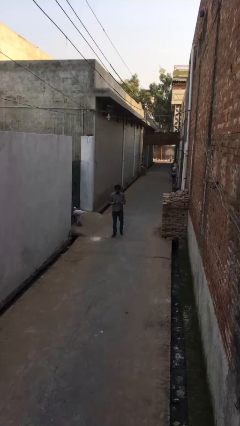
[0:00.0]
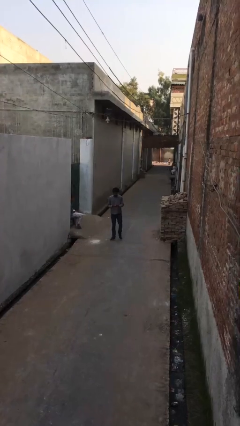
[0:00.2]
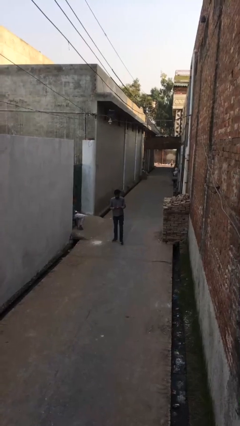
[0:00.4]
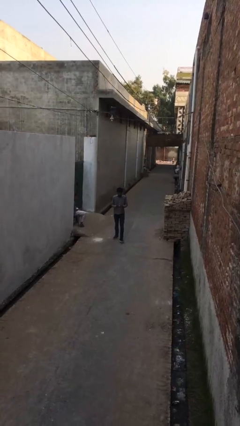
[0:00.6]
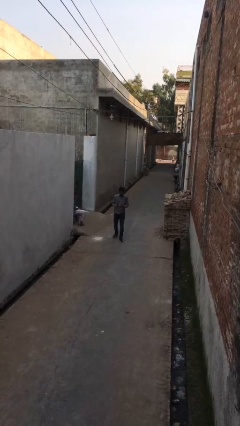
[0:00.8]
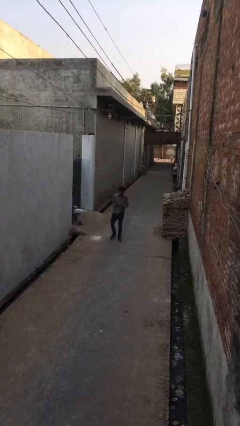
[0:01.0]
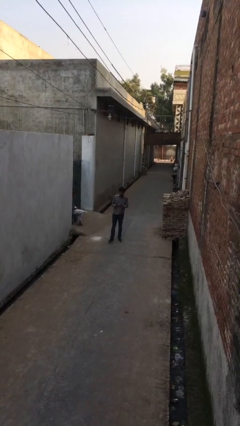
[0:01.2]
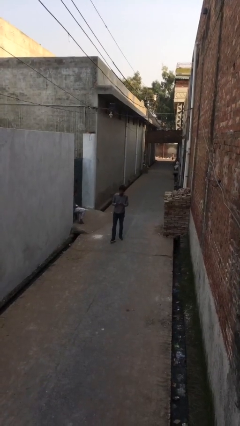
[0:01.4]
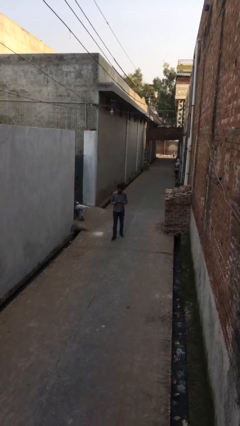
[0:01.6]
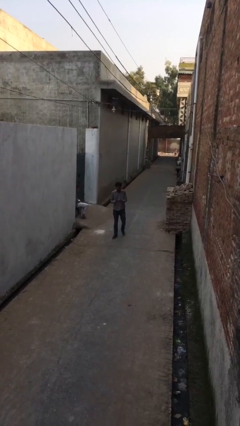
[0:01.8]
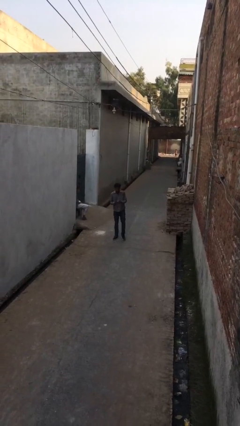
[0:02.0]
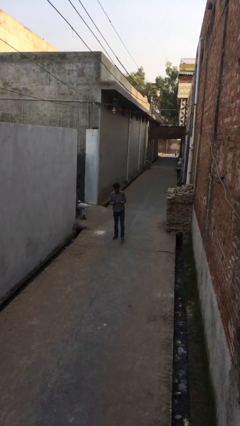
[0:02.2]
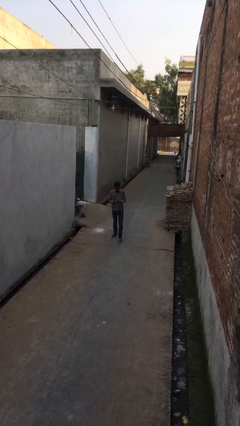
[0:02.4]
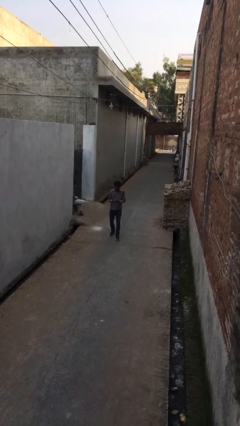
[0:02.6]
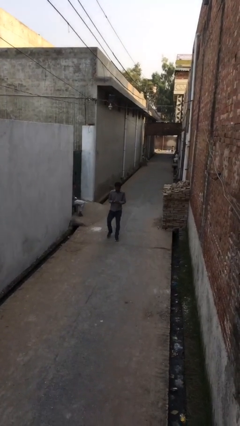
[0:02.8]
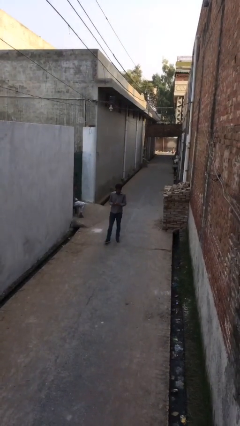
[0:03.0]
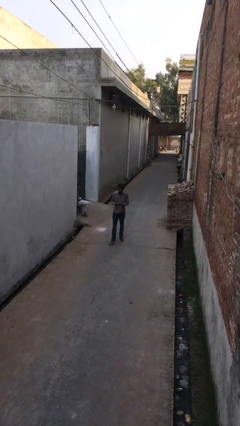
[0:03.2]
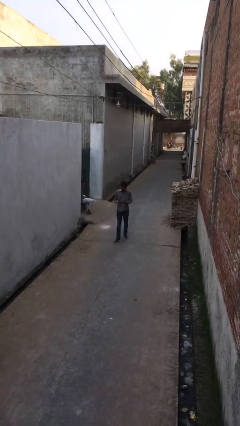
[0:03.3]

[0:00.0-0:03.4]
person texts on phone

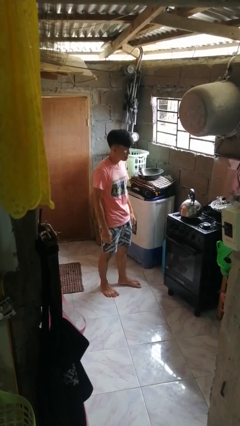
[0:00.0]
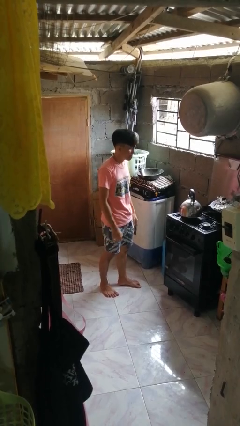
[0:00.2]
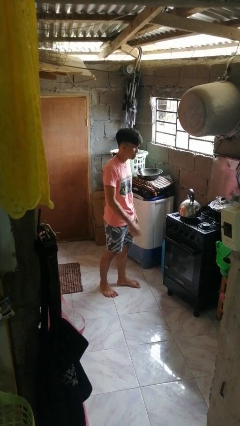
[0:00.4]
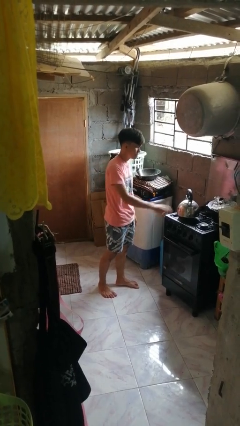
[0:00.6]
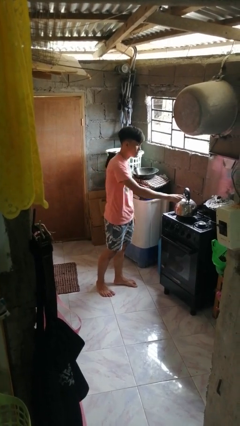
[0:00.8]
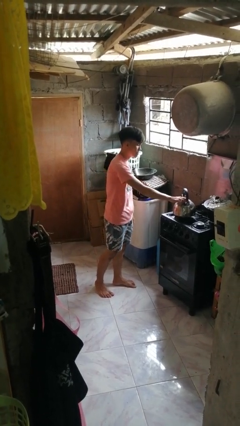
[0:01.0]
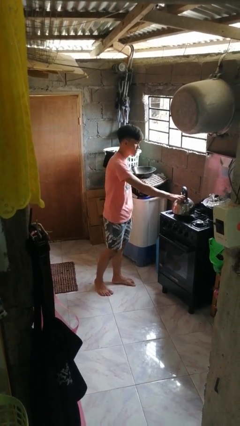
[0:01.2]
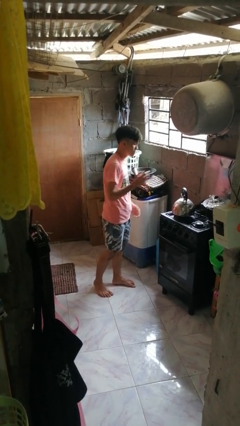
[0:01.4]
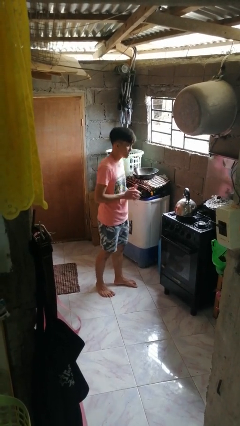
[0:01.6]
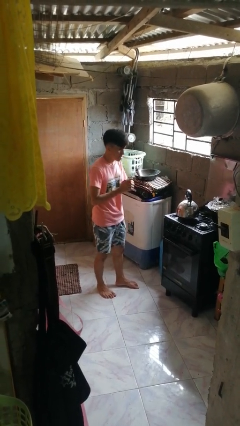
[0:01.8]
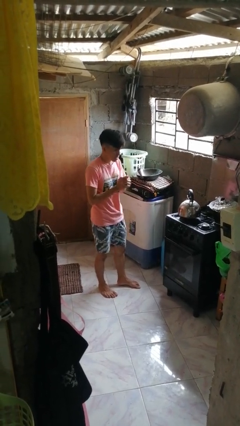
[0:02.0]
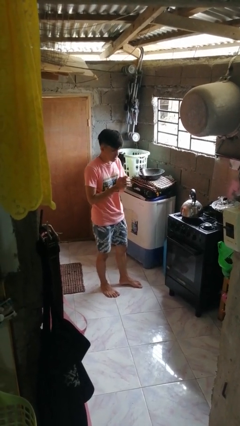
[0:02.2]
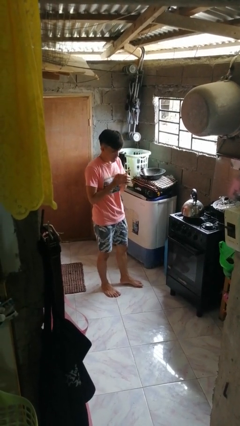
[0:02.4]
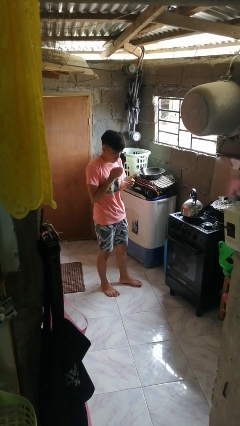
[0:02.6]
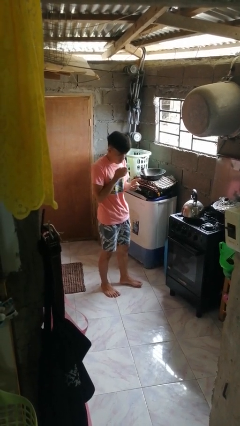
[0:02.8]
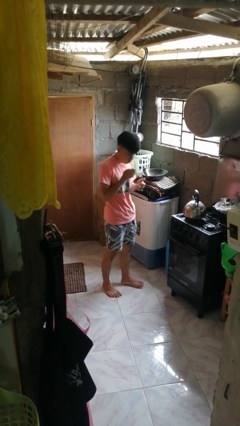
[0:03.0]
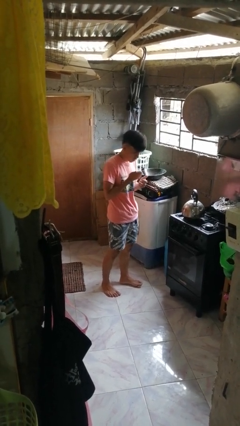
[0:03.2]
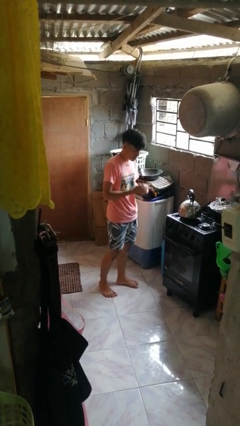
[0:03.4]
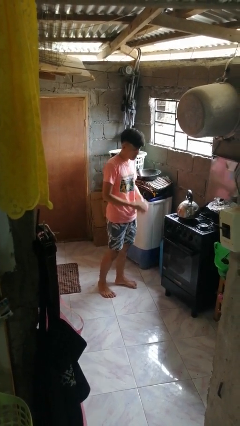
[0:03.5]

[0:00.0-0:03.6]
person burns hand

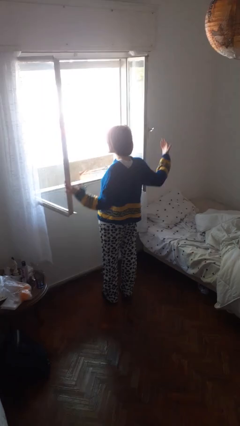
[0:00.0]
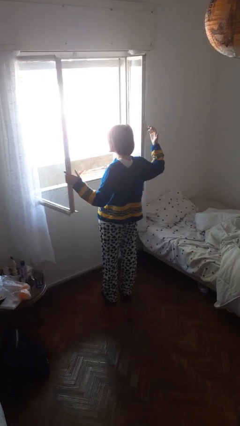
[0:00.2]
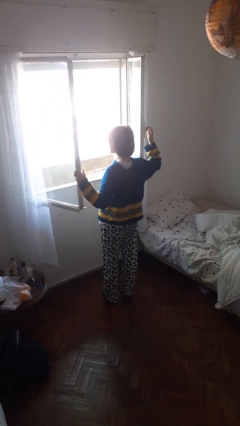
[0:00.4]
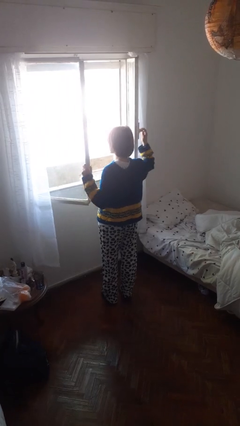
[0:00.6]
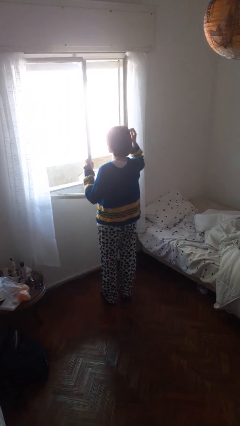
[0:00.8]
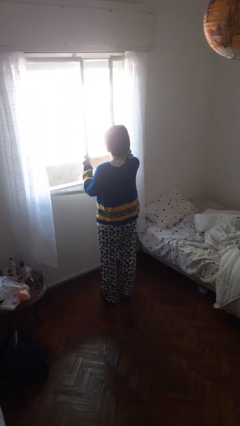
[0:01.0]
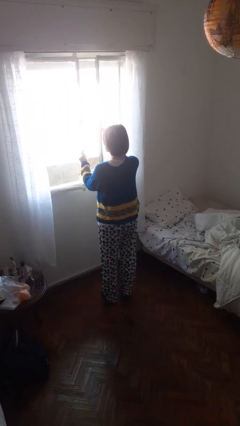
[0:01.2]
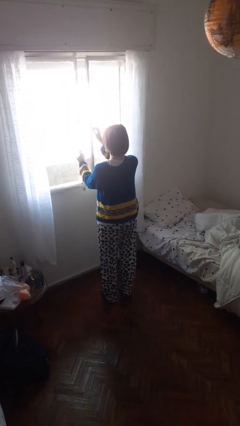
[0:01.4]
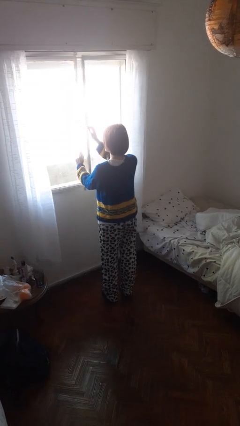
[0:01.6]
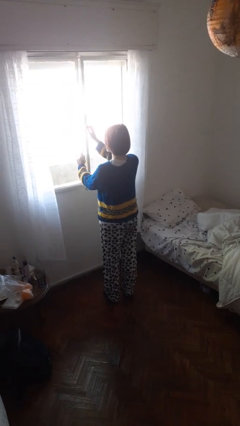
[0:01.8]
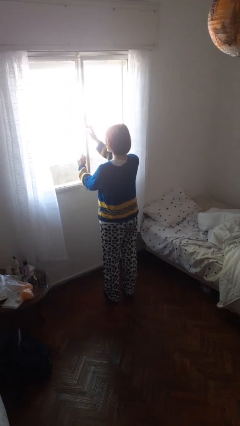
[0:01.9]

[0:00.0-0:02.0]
person closes home window

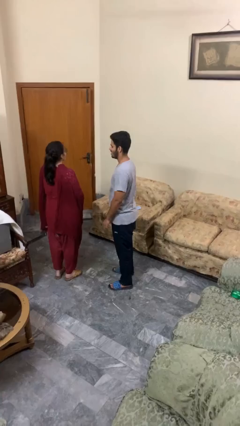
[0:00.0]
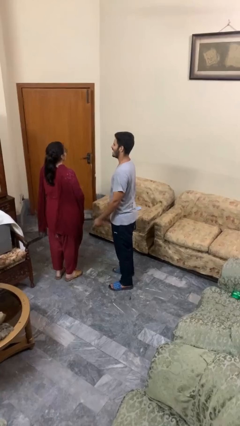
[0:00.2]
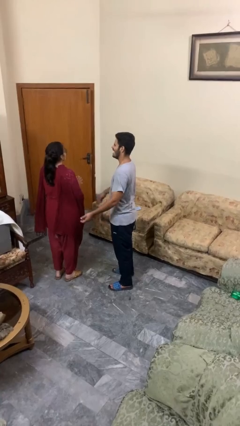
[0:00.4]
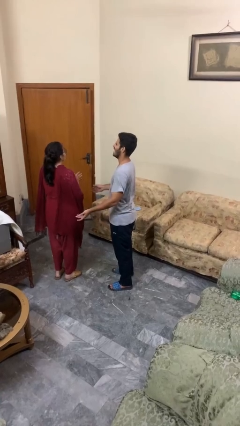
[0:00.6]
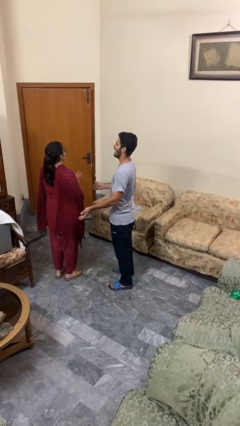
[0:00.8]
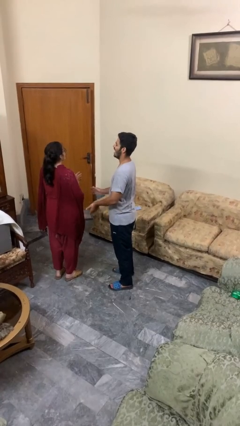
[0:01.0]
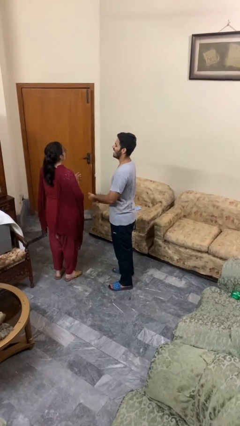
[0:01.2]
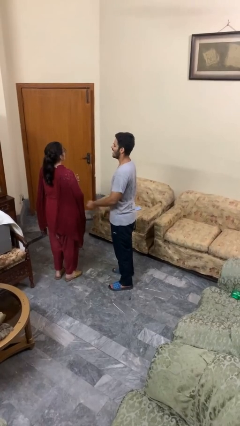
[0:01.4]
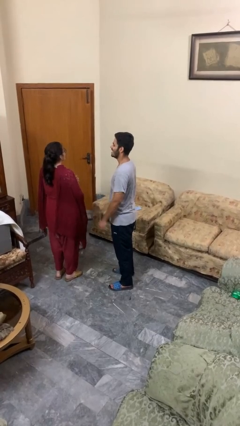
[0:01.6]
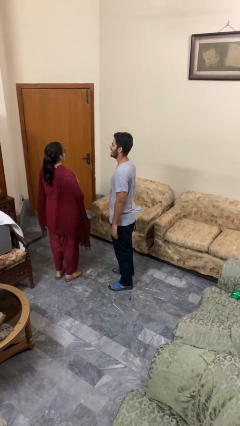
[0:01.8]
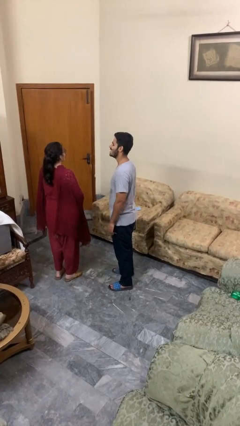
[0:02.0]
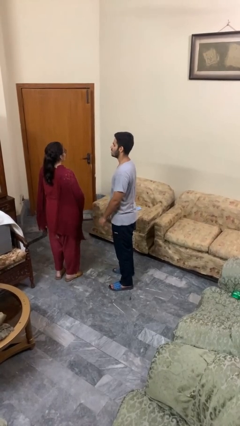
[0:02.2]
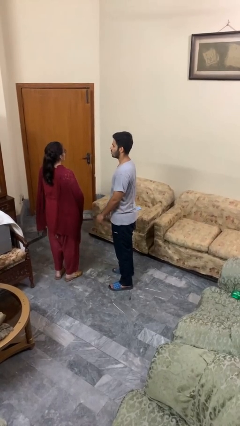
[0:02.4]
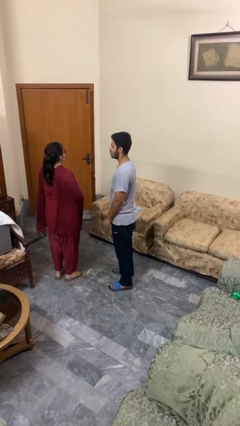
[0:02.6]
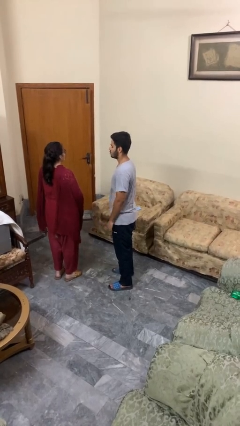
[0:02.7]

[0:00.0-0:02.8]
person laughs with person

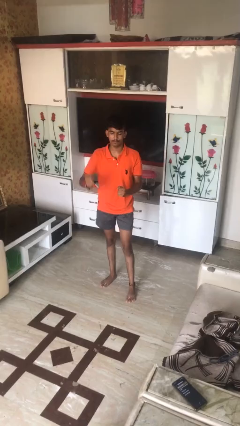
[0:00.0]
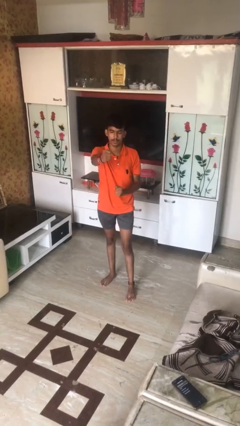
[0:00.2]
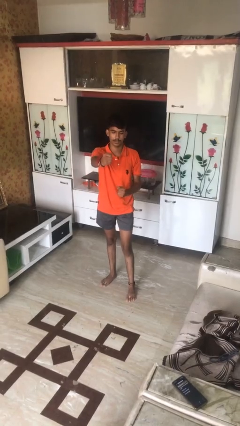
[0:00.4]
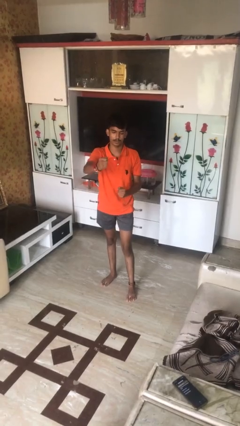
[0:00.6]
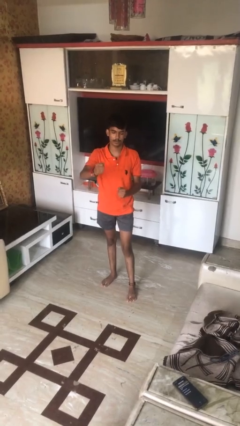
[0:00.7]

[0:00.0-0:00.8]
person punches

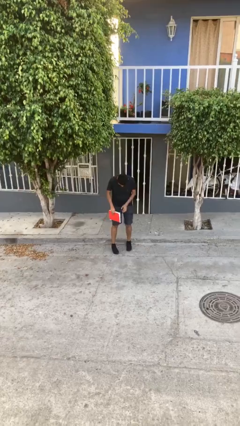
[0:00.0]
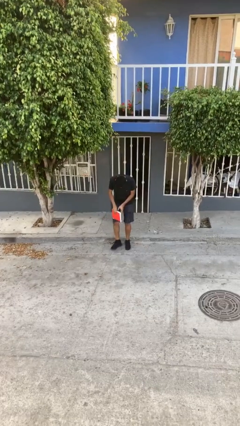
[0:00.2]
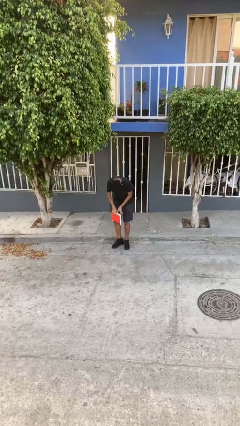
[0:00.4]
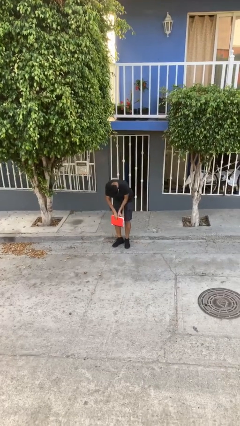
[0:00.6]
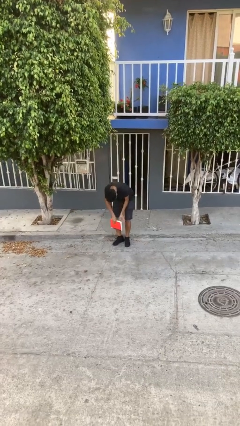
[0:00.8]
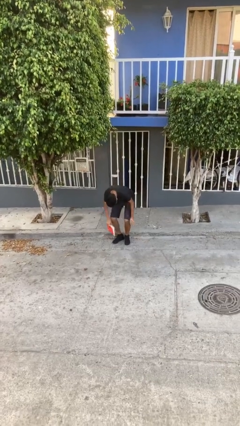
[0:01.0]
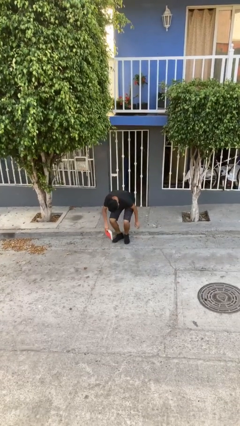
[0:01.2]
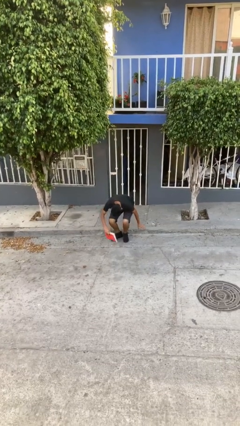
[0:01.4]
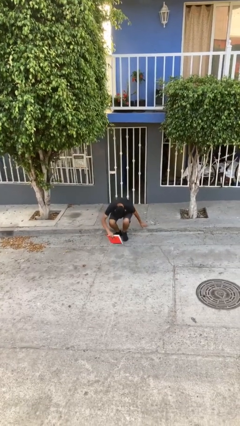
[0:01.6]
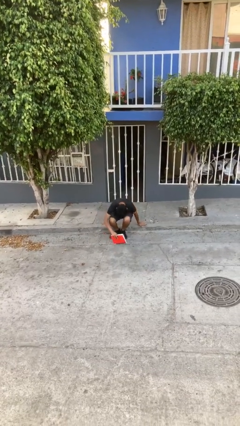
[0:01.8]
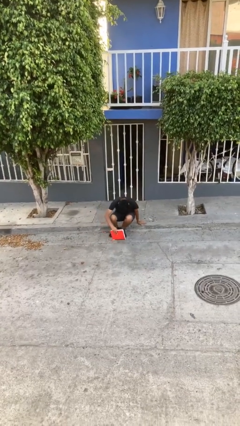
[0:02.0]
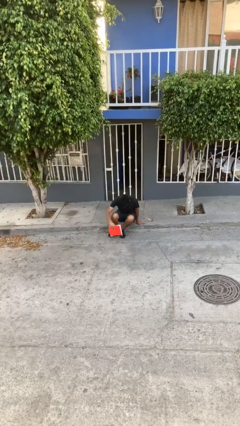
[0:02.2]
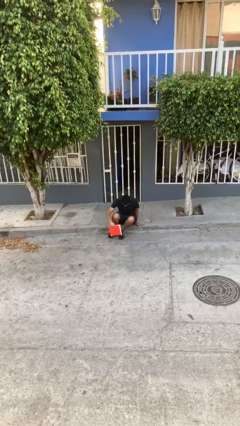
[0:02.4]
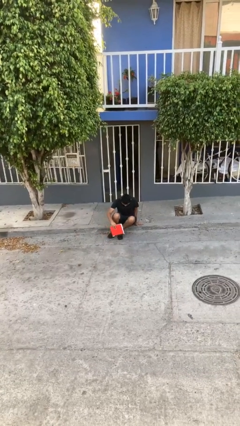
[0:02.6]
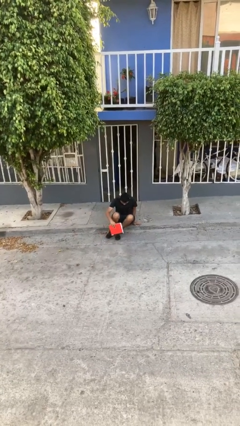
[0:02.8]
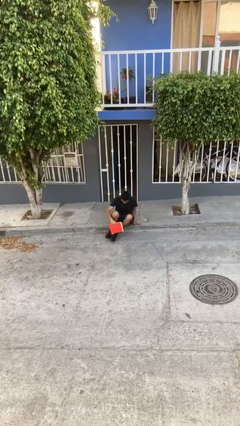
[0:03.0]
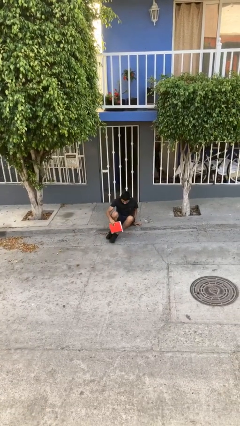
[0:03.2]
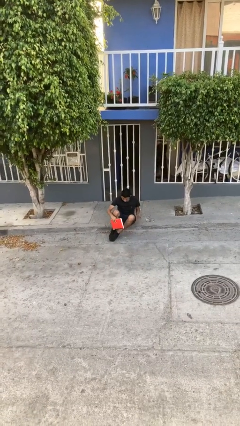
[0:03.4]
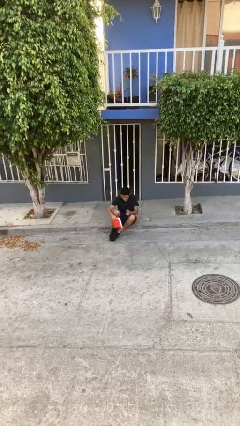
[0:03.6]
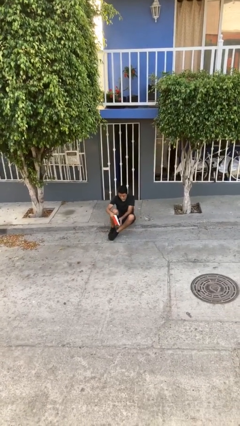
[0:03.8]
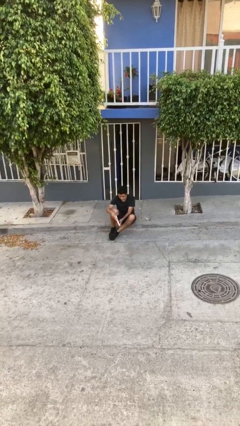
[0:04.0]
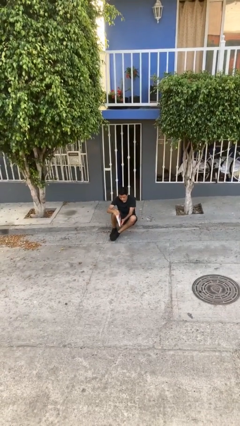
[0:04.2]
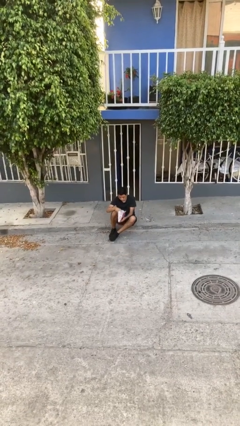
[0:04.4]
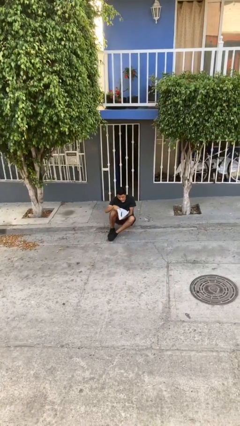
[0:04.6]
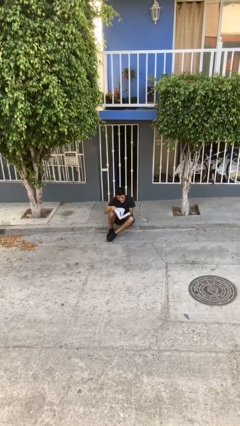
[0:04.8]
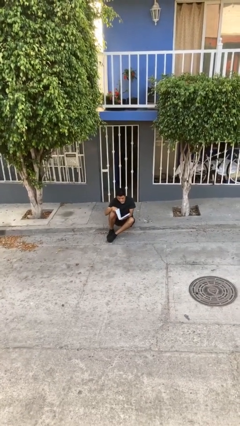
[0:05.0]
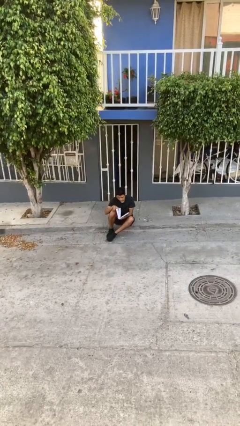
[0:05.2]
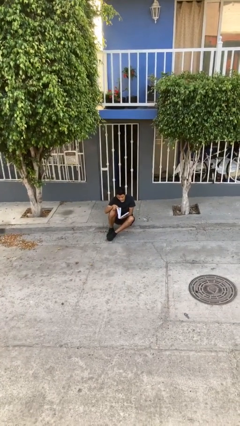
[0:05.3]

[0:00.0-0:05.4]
person sits down
